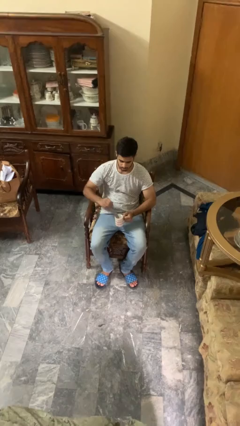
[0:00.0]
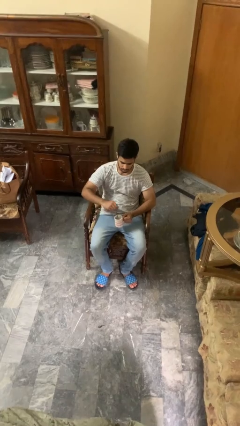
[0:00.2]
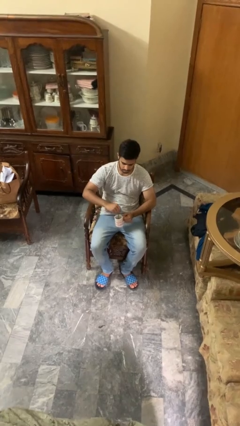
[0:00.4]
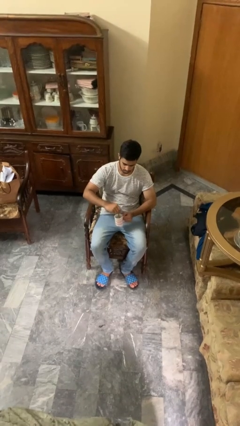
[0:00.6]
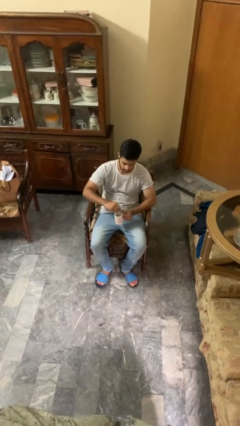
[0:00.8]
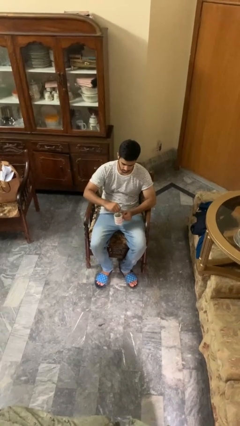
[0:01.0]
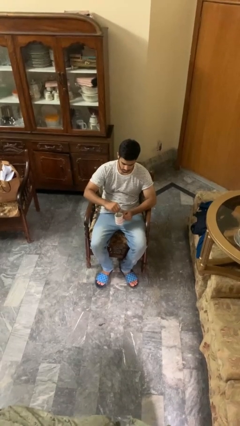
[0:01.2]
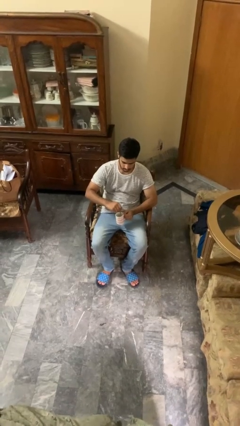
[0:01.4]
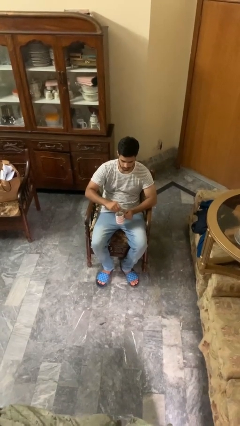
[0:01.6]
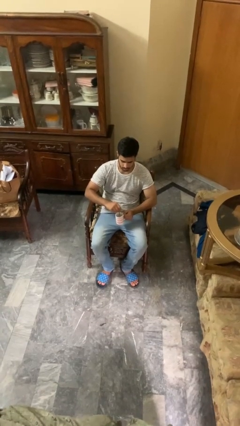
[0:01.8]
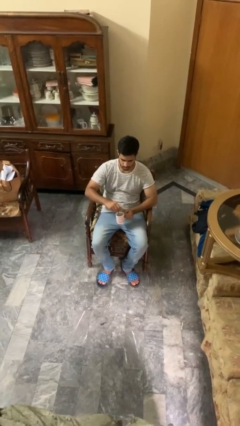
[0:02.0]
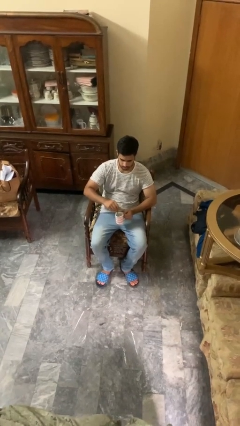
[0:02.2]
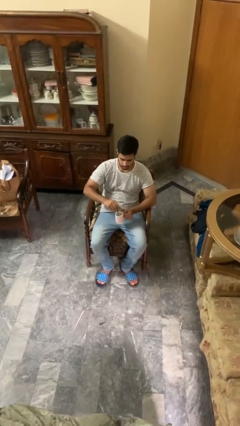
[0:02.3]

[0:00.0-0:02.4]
person stirs mug

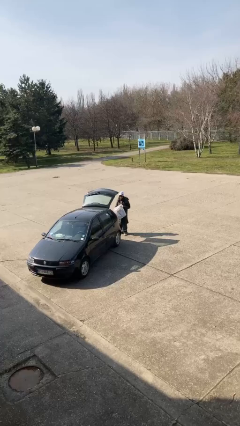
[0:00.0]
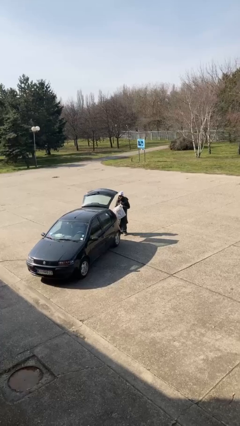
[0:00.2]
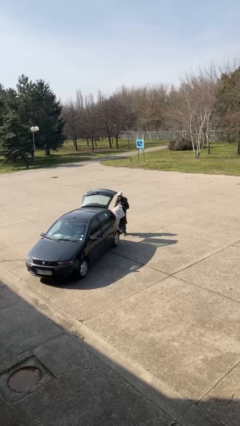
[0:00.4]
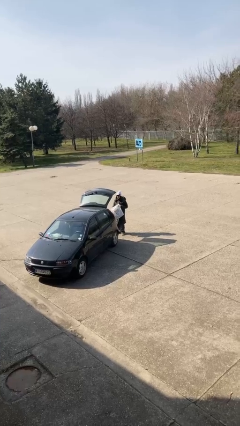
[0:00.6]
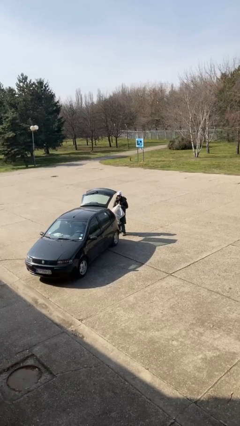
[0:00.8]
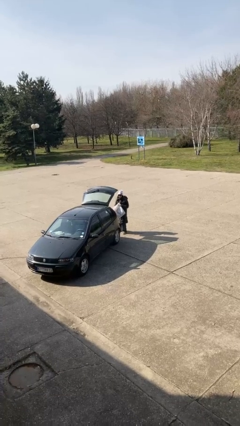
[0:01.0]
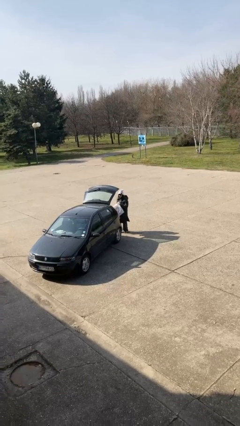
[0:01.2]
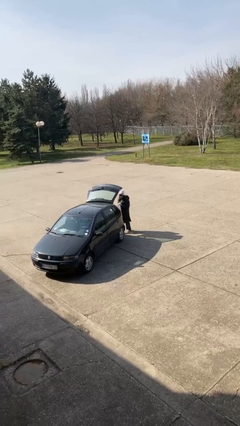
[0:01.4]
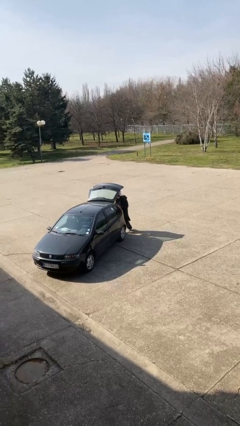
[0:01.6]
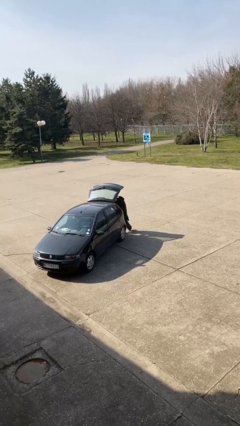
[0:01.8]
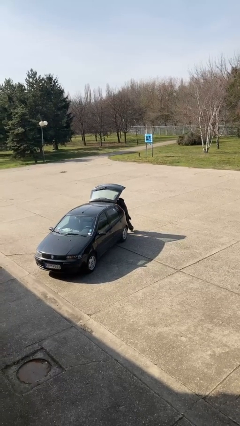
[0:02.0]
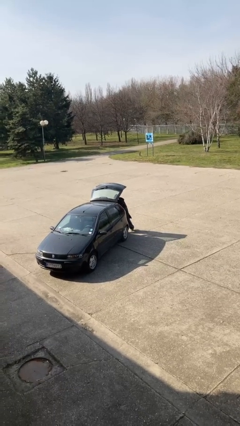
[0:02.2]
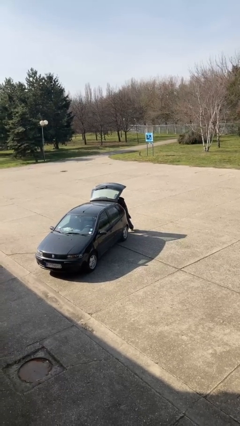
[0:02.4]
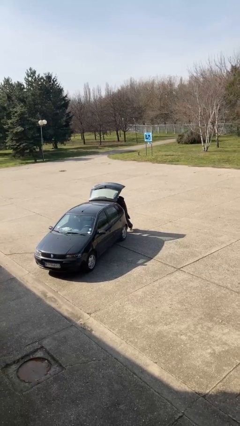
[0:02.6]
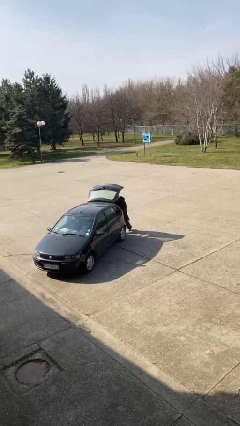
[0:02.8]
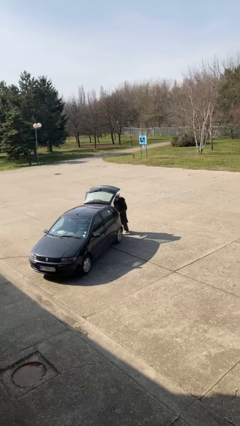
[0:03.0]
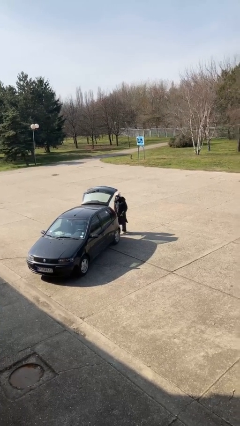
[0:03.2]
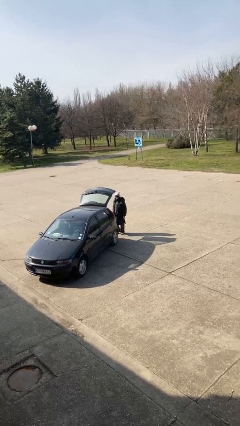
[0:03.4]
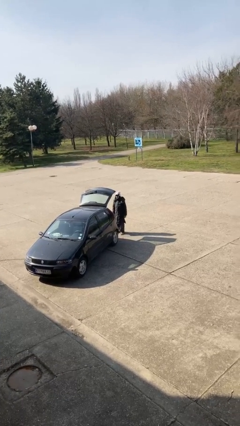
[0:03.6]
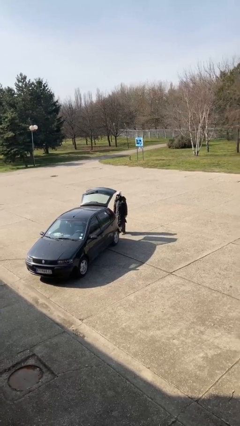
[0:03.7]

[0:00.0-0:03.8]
person loads car

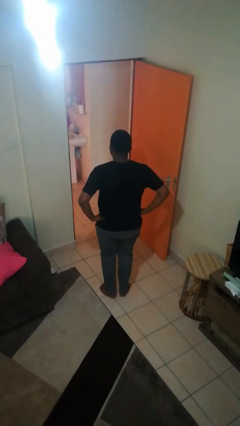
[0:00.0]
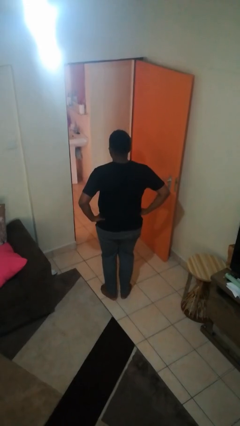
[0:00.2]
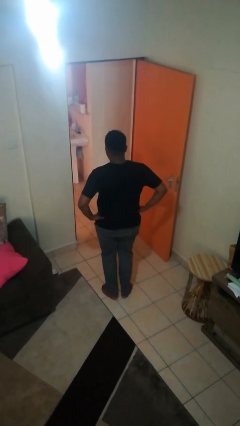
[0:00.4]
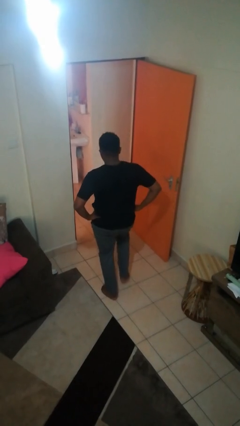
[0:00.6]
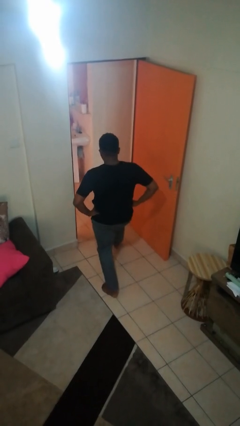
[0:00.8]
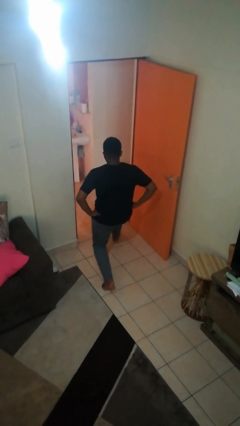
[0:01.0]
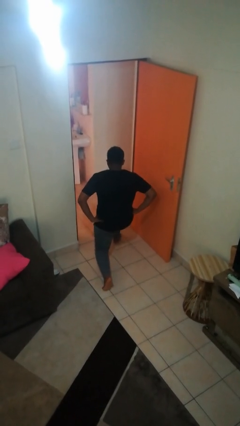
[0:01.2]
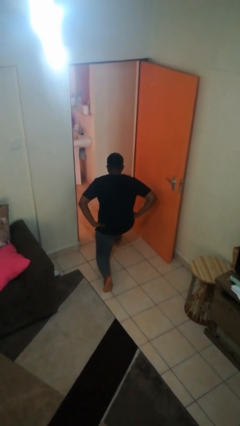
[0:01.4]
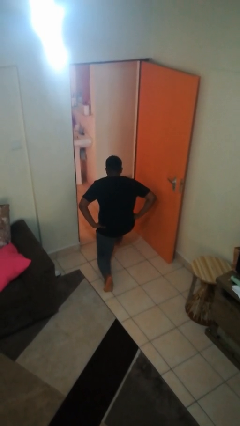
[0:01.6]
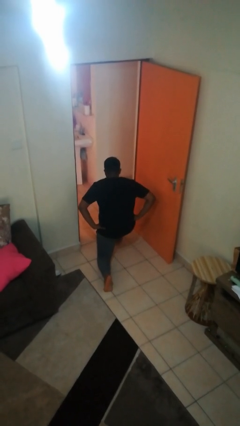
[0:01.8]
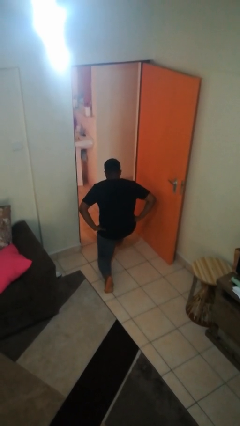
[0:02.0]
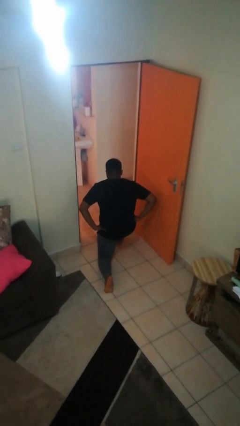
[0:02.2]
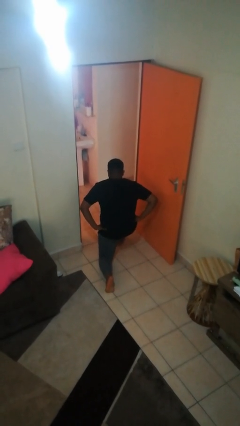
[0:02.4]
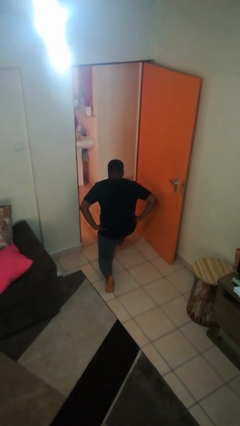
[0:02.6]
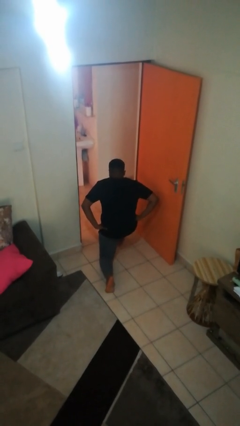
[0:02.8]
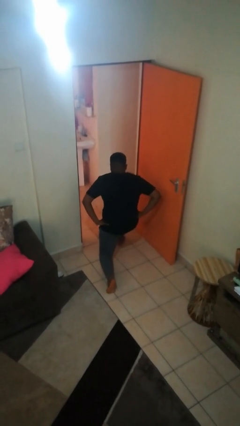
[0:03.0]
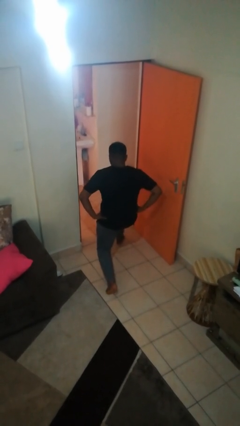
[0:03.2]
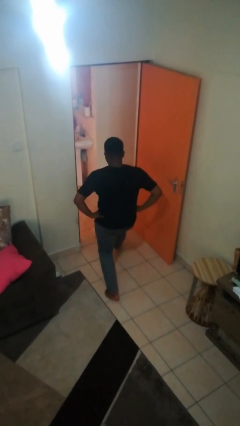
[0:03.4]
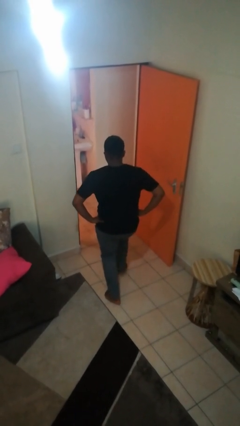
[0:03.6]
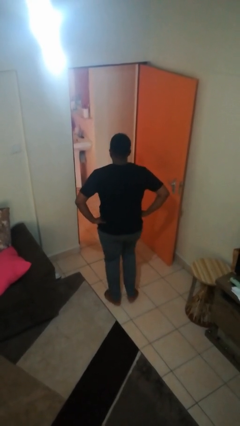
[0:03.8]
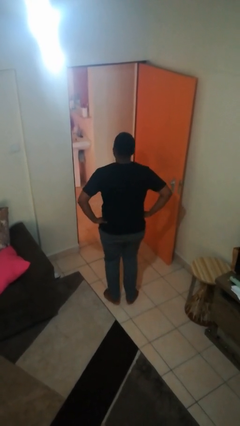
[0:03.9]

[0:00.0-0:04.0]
person exercises with lunges

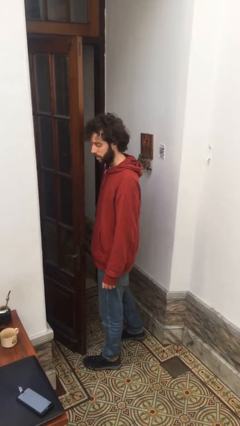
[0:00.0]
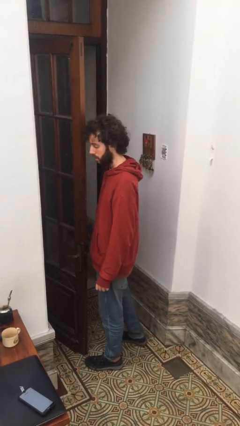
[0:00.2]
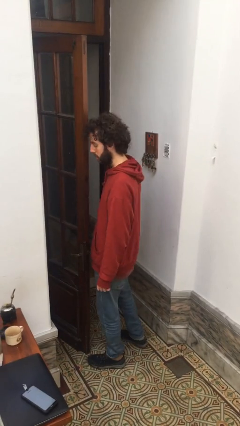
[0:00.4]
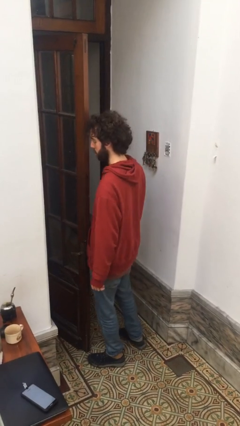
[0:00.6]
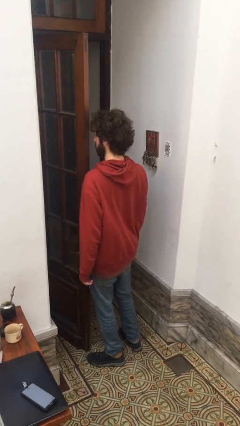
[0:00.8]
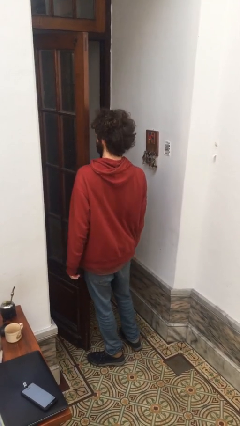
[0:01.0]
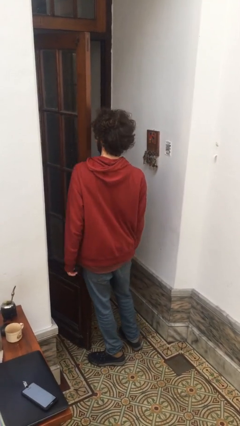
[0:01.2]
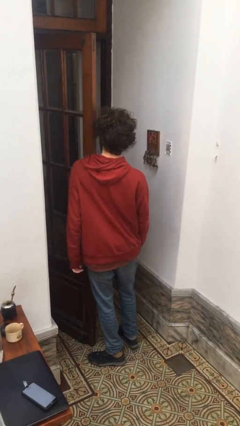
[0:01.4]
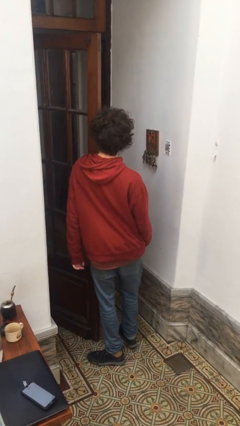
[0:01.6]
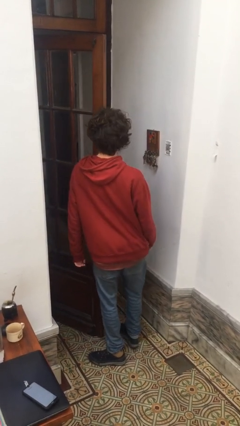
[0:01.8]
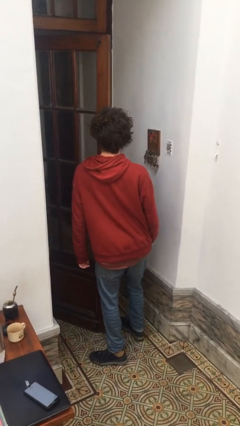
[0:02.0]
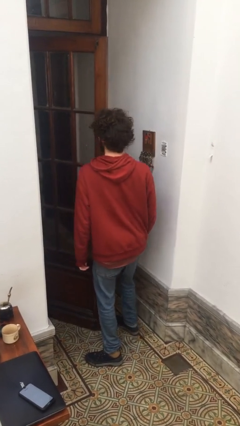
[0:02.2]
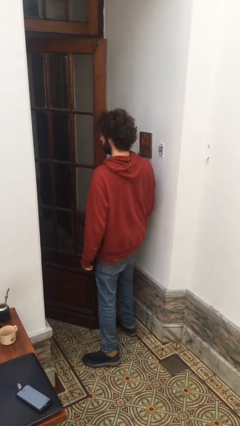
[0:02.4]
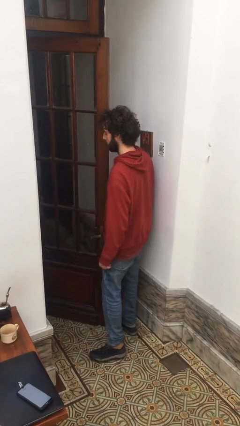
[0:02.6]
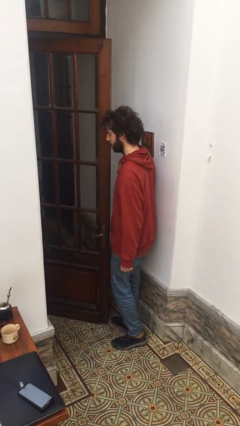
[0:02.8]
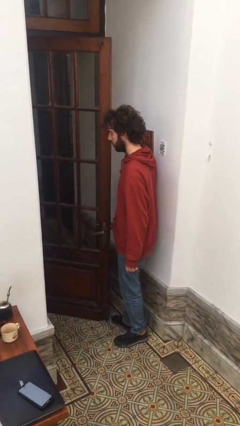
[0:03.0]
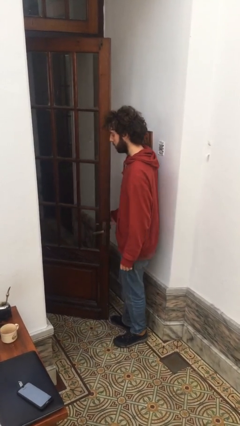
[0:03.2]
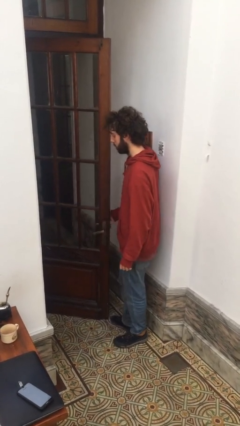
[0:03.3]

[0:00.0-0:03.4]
person closes door with hip

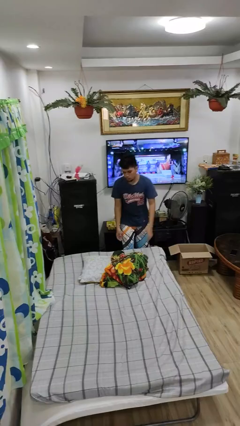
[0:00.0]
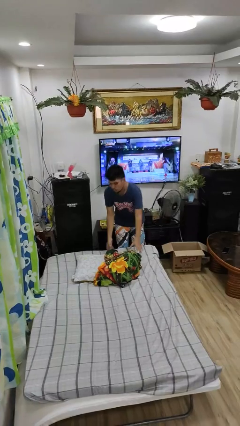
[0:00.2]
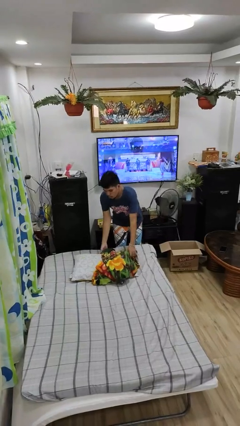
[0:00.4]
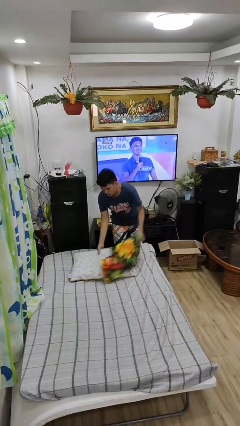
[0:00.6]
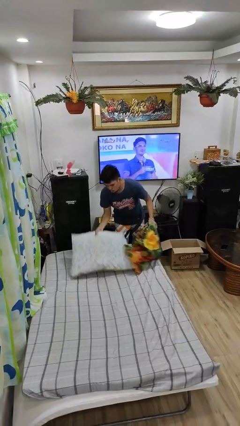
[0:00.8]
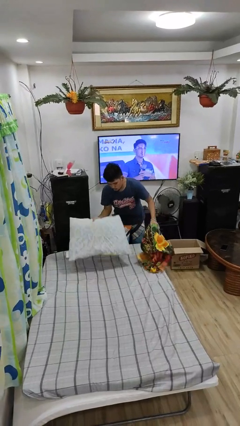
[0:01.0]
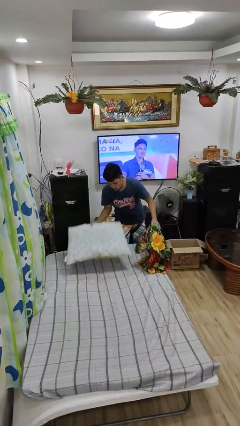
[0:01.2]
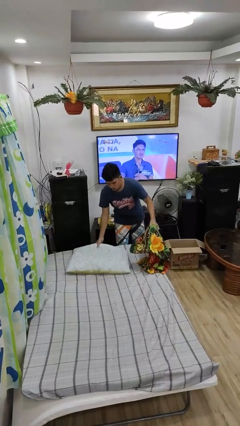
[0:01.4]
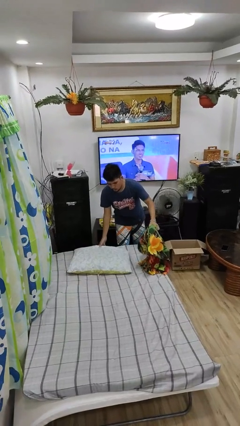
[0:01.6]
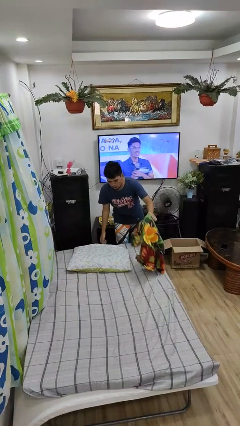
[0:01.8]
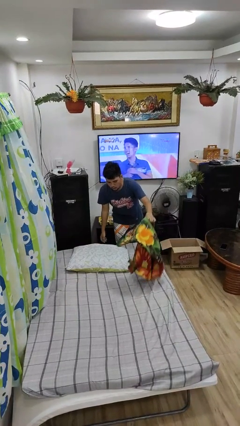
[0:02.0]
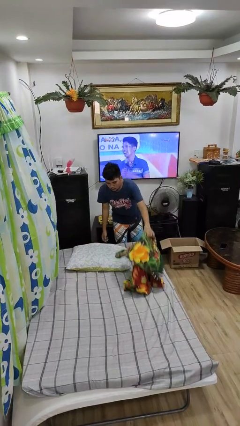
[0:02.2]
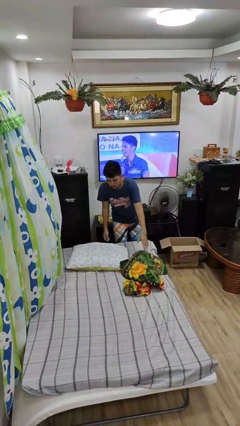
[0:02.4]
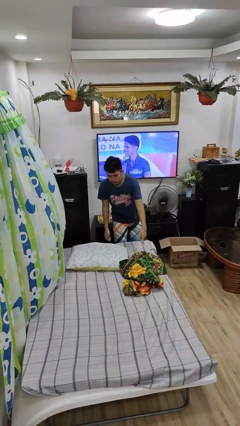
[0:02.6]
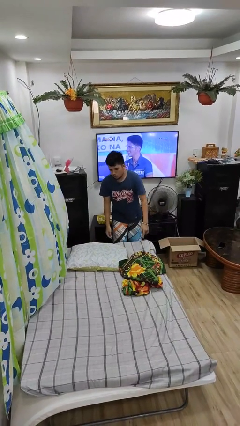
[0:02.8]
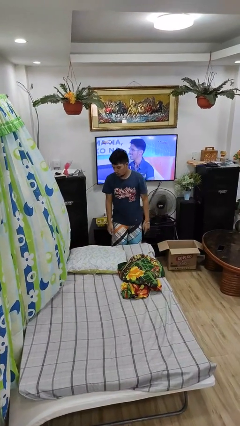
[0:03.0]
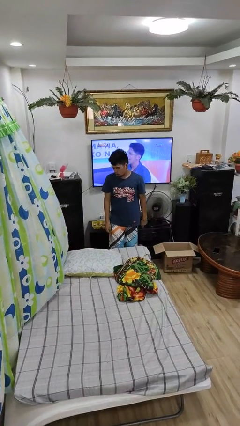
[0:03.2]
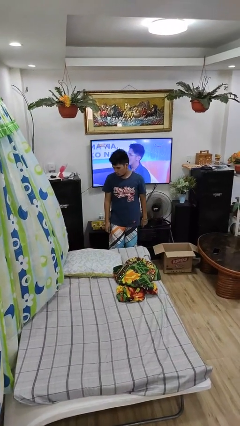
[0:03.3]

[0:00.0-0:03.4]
person makes bed

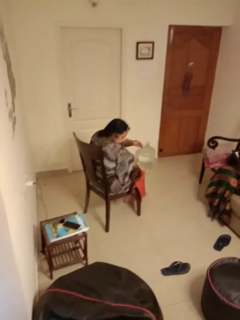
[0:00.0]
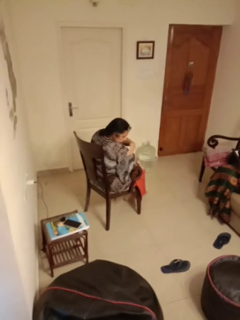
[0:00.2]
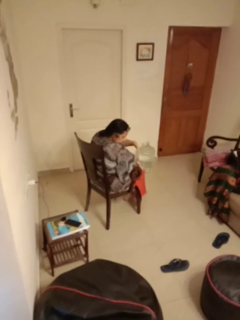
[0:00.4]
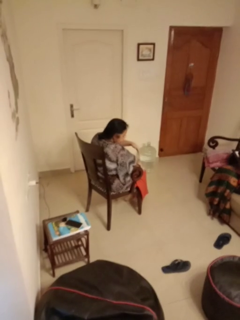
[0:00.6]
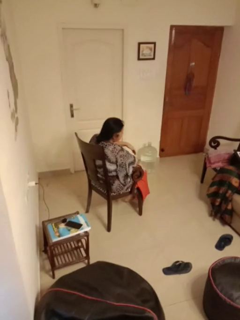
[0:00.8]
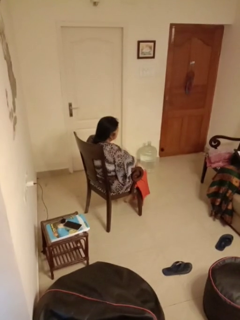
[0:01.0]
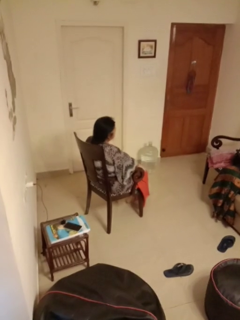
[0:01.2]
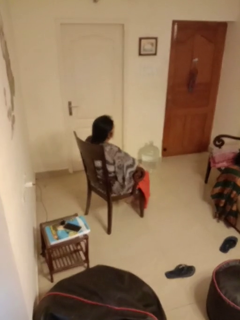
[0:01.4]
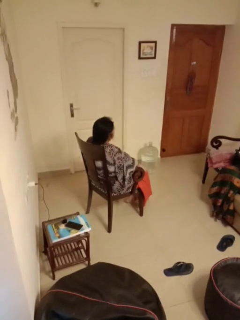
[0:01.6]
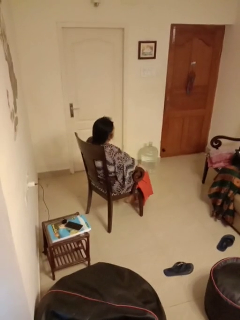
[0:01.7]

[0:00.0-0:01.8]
person swats bug
